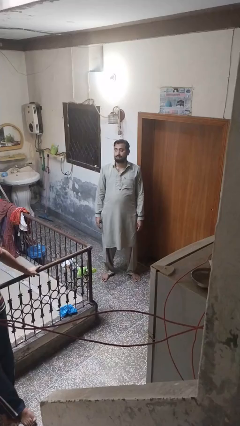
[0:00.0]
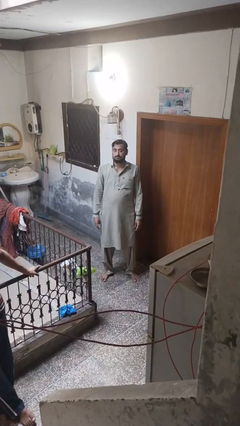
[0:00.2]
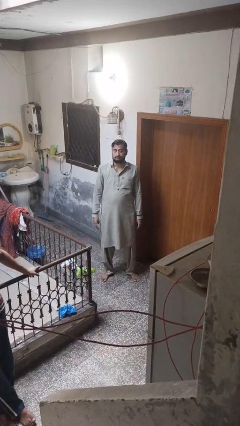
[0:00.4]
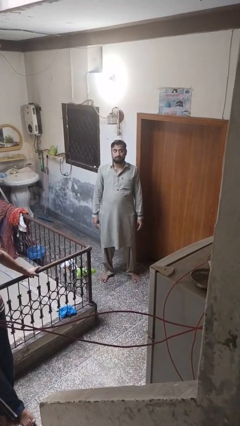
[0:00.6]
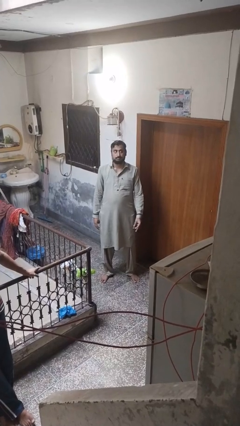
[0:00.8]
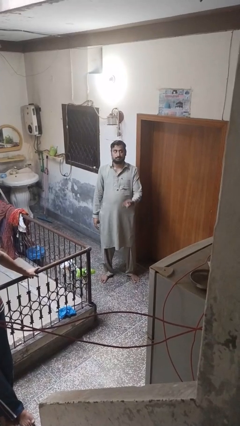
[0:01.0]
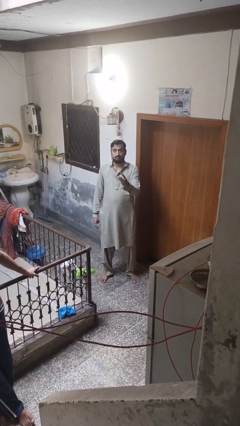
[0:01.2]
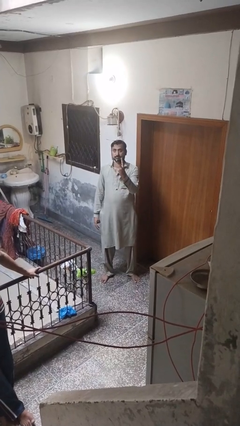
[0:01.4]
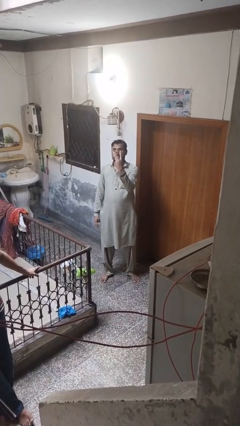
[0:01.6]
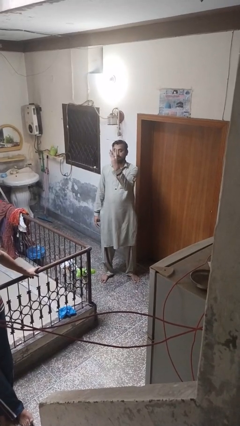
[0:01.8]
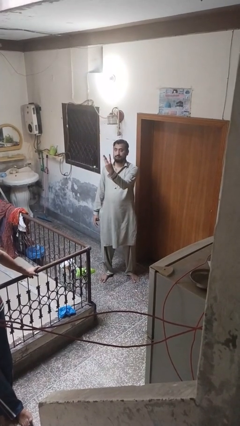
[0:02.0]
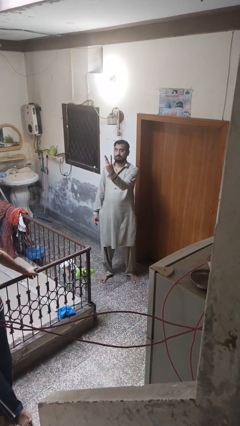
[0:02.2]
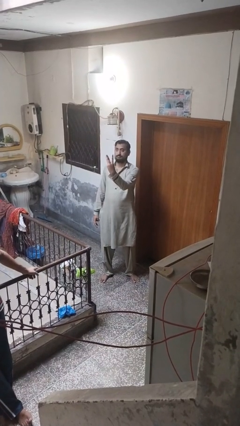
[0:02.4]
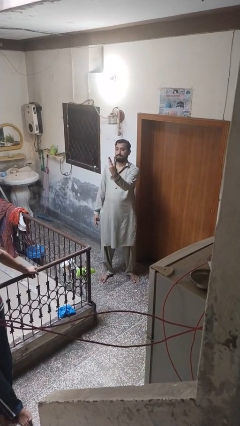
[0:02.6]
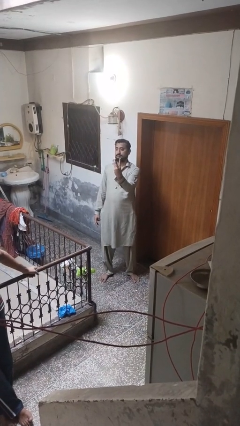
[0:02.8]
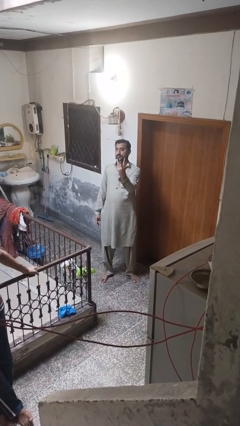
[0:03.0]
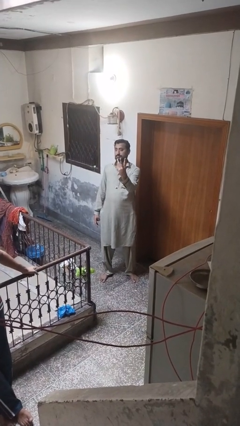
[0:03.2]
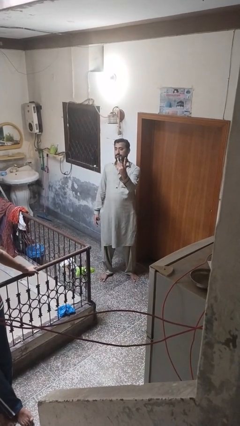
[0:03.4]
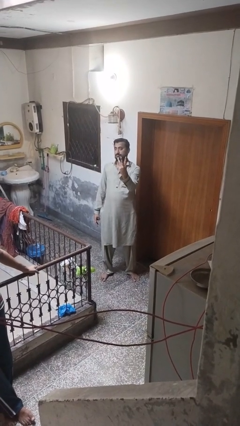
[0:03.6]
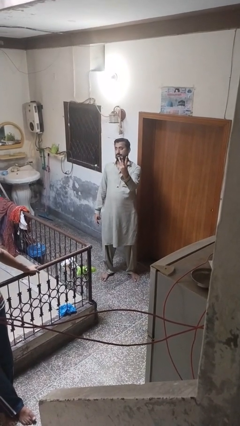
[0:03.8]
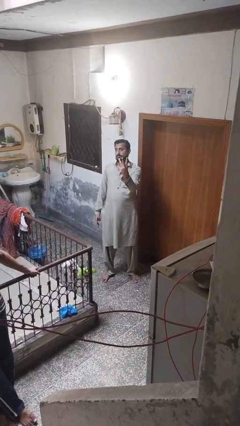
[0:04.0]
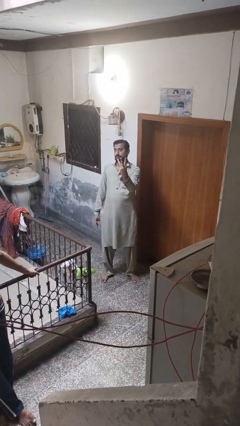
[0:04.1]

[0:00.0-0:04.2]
person gestures number three

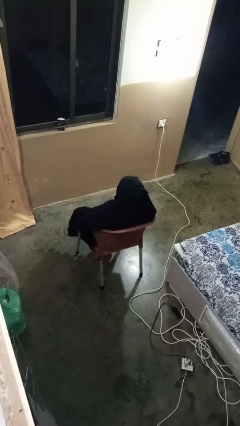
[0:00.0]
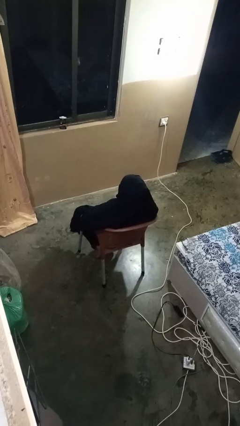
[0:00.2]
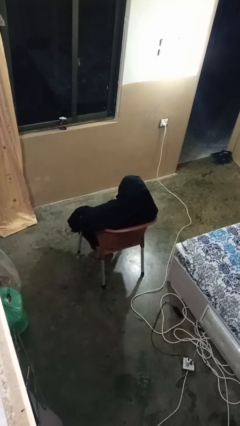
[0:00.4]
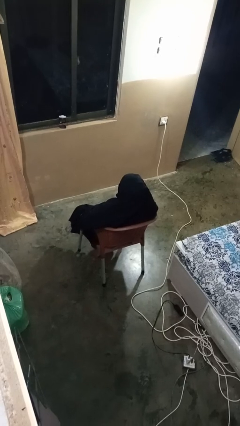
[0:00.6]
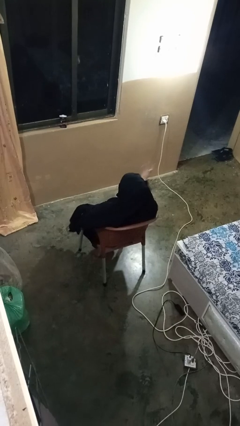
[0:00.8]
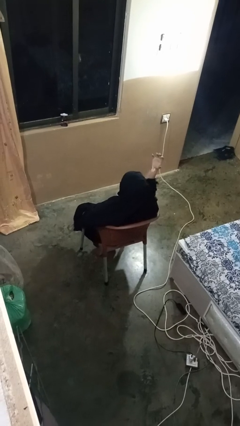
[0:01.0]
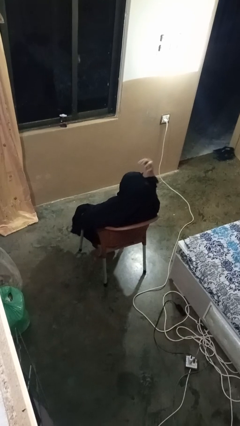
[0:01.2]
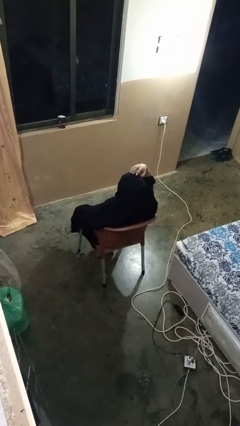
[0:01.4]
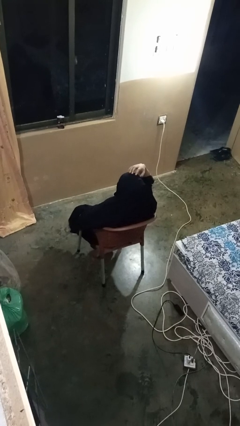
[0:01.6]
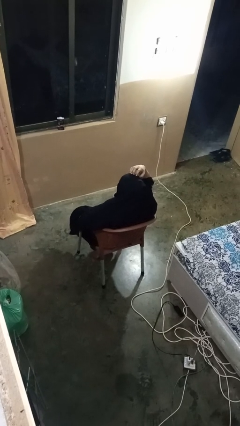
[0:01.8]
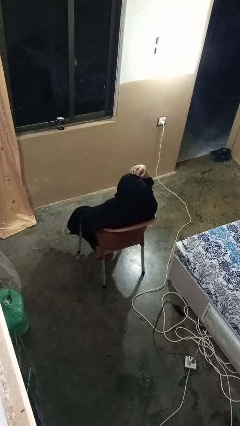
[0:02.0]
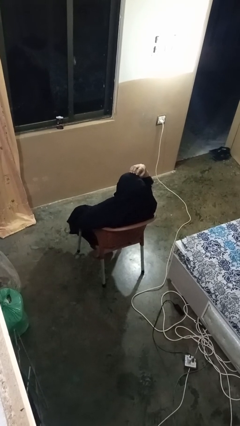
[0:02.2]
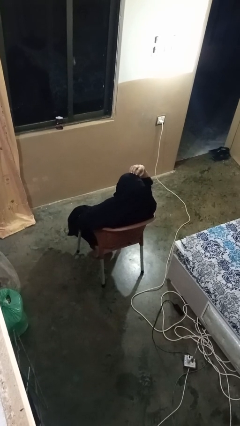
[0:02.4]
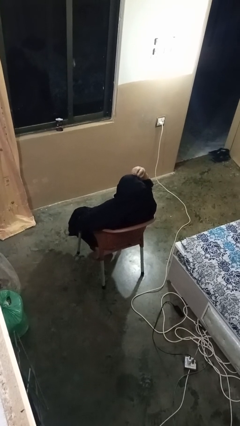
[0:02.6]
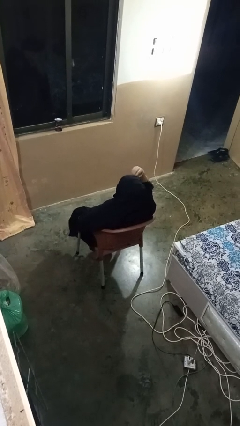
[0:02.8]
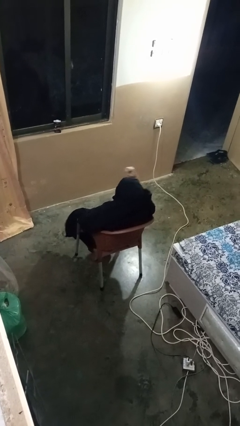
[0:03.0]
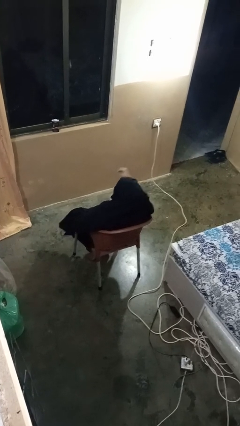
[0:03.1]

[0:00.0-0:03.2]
person scratches face

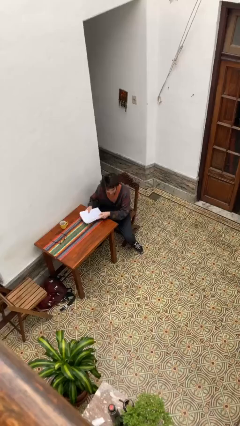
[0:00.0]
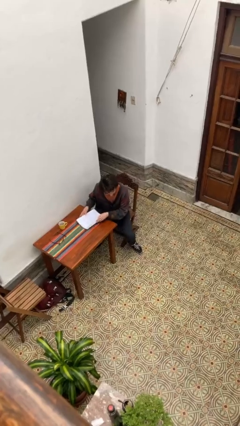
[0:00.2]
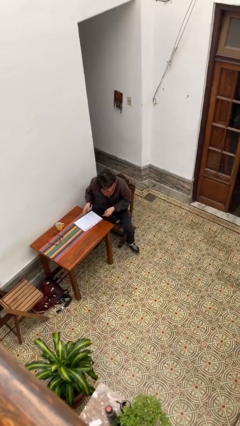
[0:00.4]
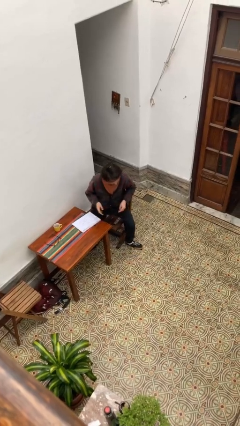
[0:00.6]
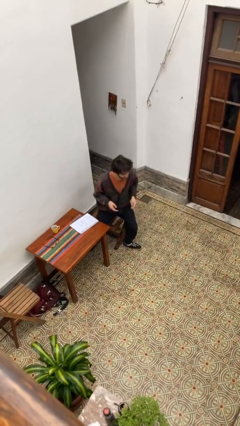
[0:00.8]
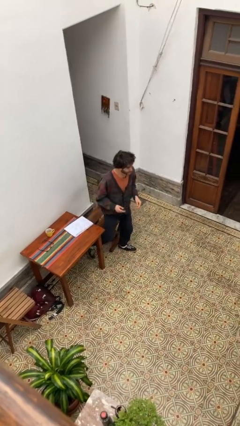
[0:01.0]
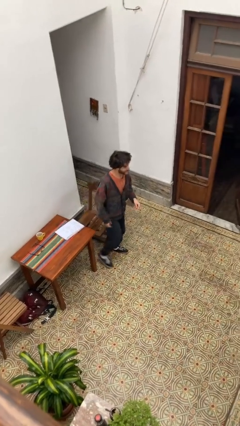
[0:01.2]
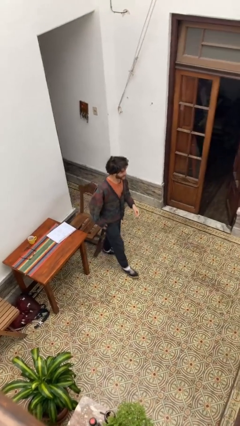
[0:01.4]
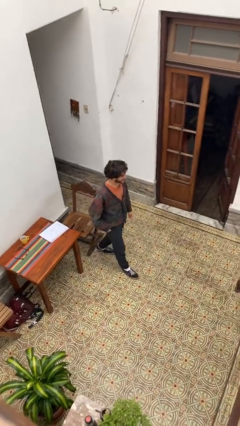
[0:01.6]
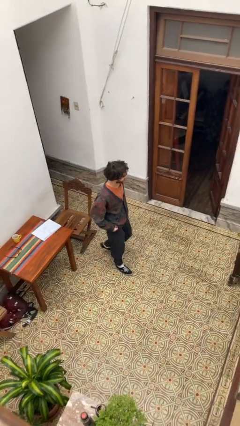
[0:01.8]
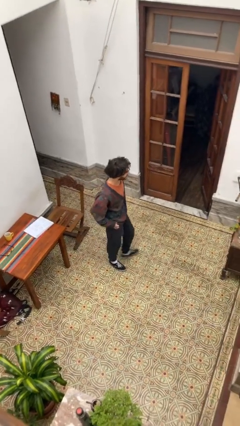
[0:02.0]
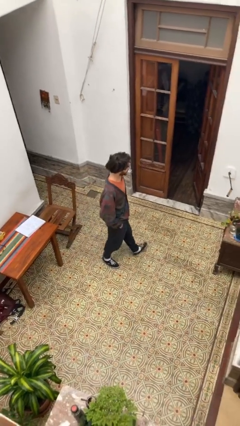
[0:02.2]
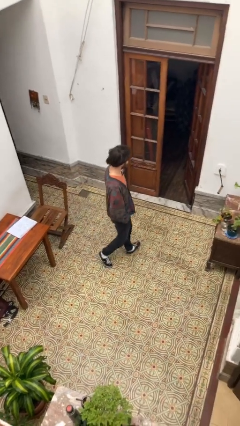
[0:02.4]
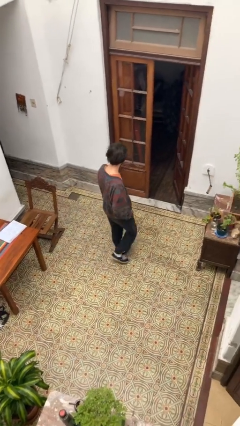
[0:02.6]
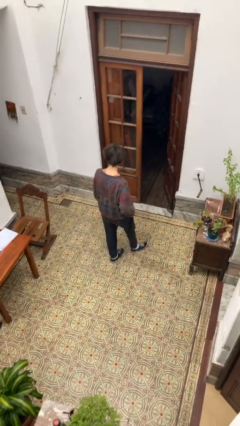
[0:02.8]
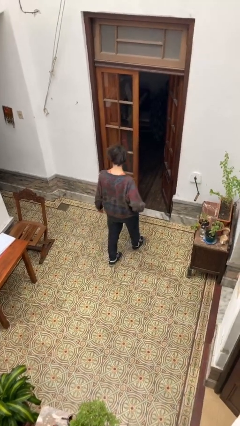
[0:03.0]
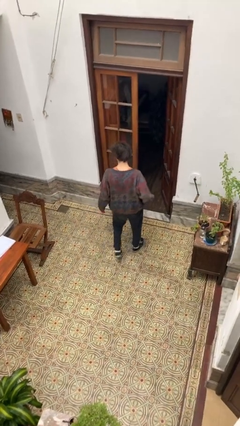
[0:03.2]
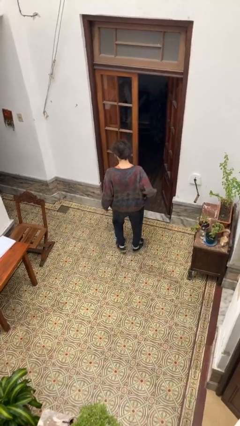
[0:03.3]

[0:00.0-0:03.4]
person stands up

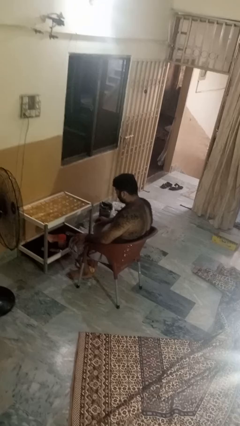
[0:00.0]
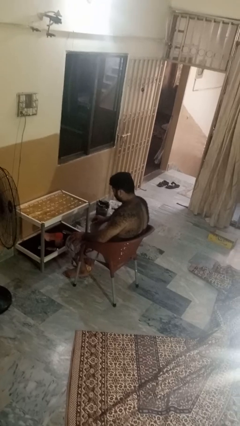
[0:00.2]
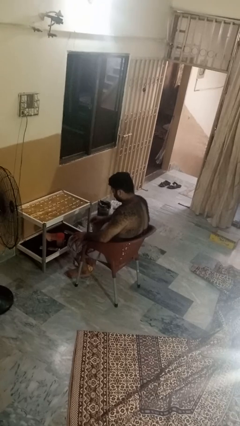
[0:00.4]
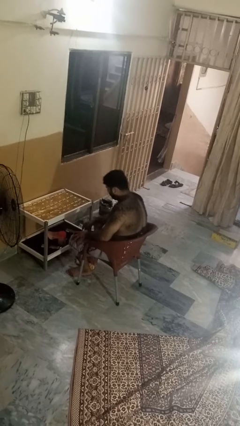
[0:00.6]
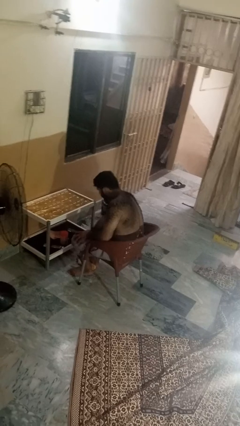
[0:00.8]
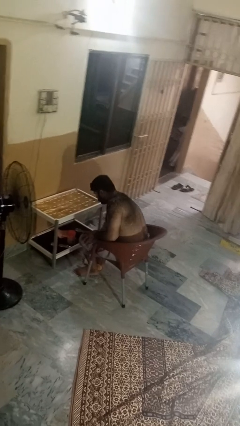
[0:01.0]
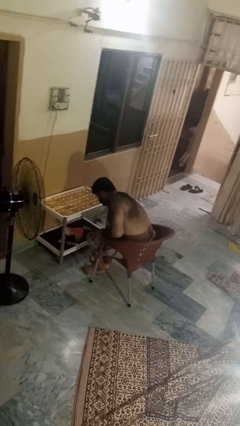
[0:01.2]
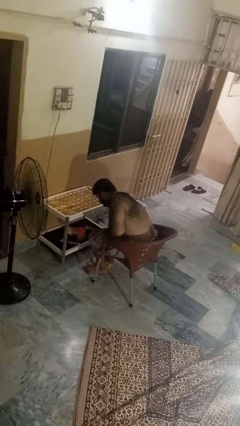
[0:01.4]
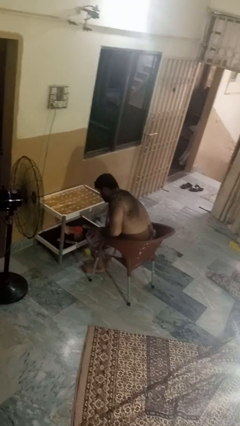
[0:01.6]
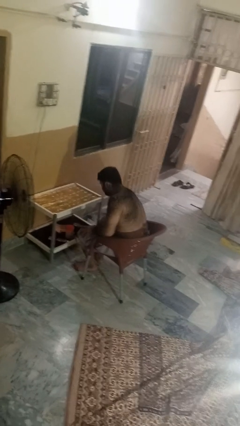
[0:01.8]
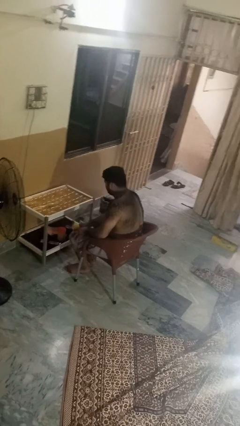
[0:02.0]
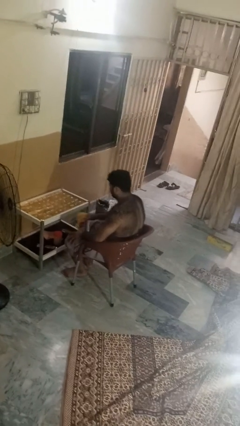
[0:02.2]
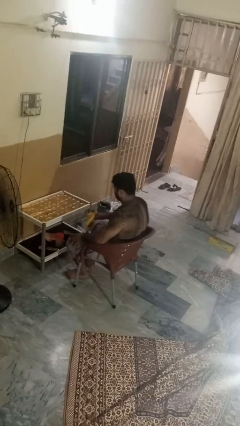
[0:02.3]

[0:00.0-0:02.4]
person picks up object from floor

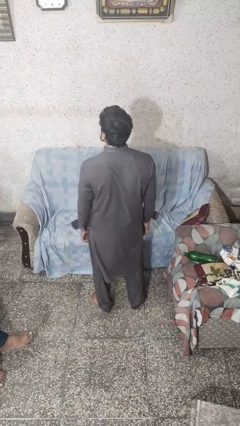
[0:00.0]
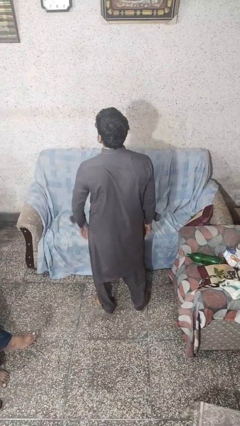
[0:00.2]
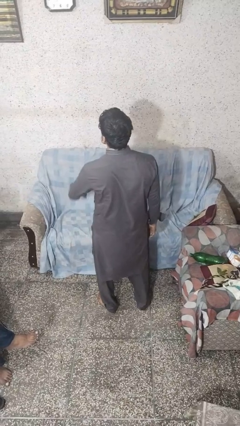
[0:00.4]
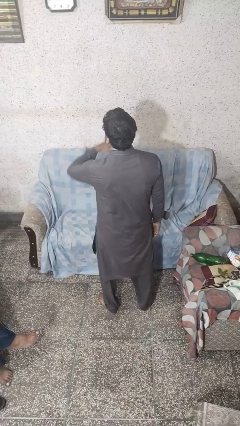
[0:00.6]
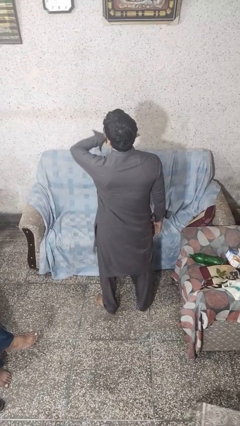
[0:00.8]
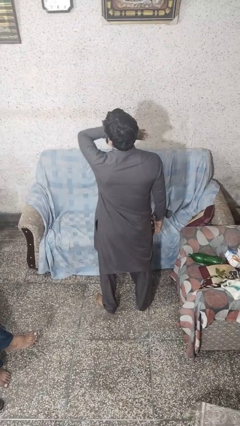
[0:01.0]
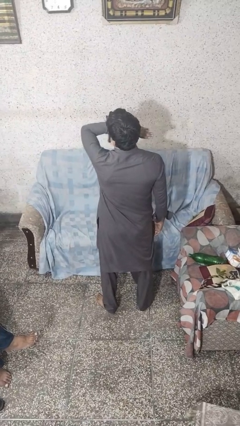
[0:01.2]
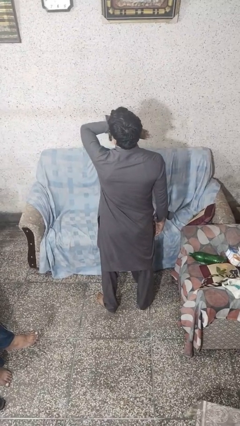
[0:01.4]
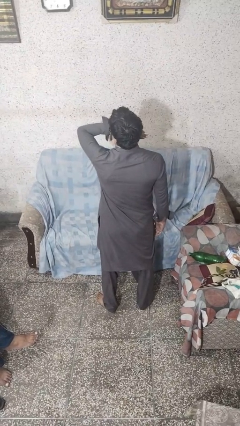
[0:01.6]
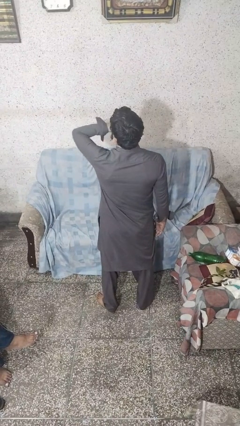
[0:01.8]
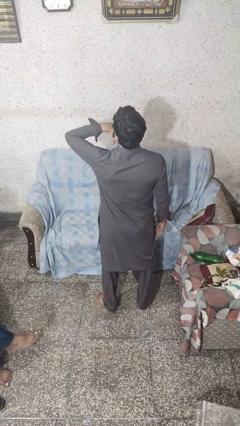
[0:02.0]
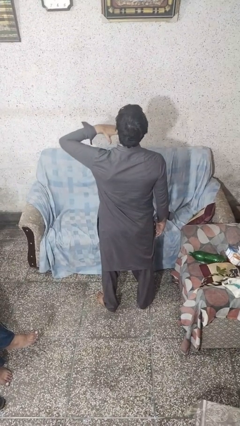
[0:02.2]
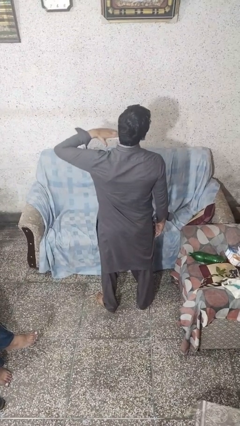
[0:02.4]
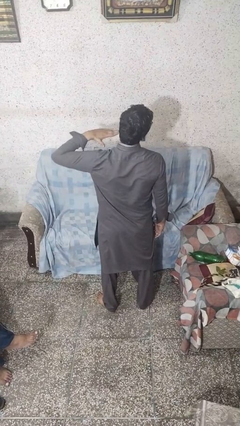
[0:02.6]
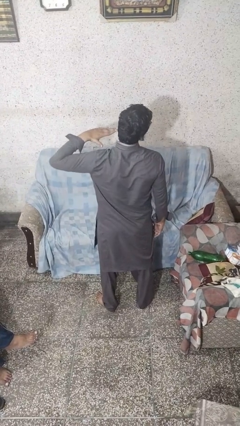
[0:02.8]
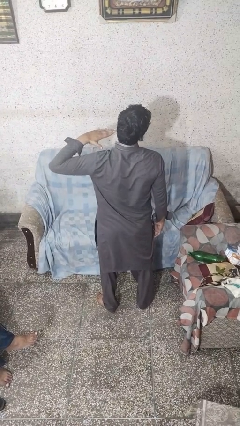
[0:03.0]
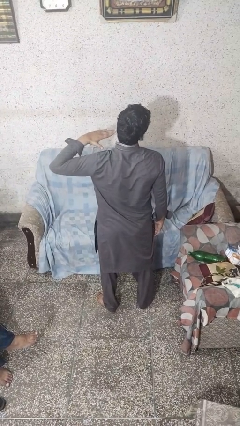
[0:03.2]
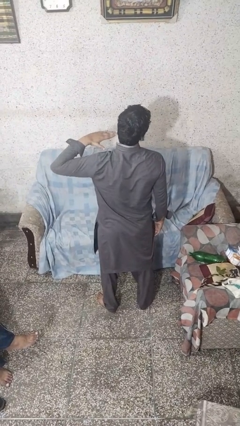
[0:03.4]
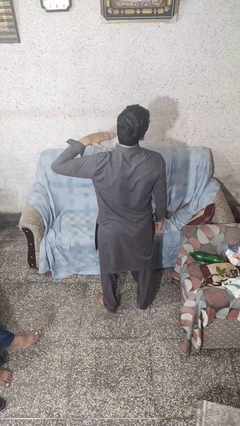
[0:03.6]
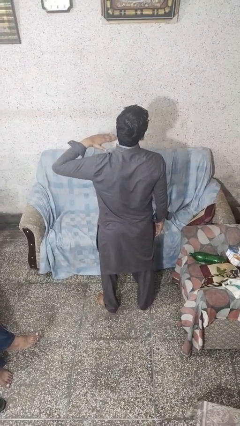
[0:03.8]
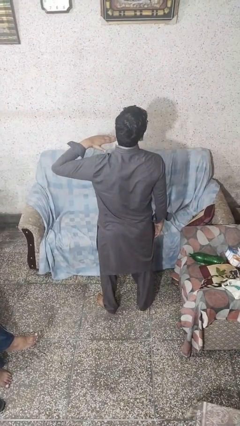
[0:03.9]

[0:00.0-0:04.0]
person gestures cut

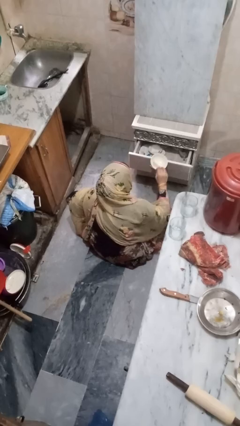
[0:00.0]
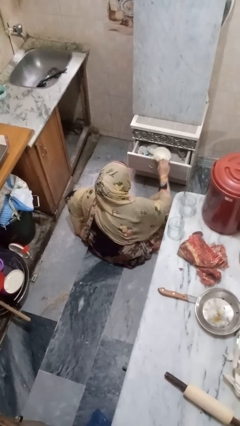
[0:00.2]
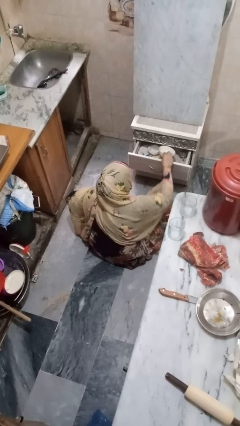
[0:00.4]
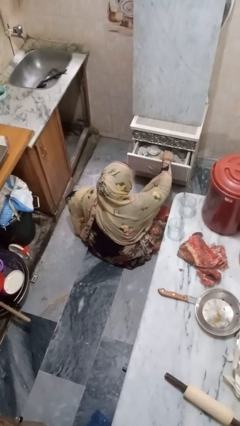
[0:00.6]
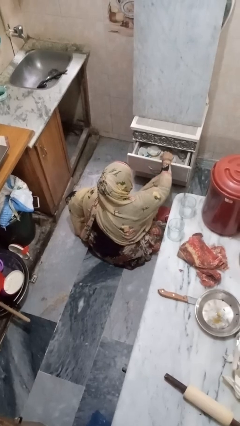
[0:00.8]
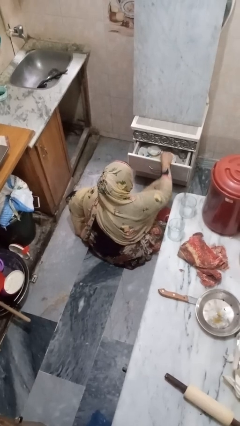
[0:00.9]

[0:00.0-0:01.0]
person puts object into kitchen drawer
